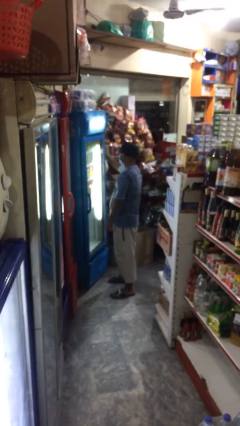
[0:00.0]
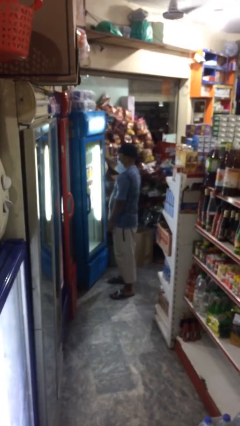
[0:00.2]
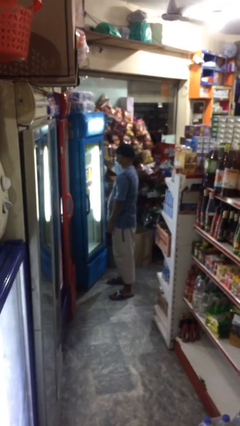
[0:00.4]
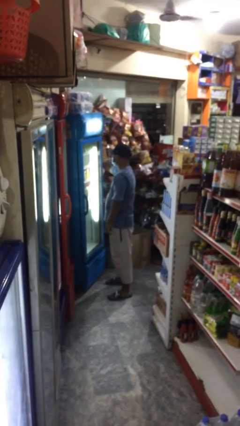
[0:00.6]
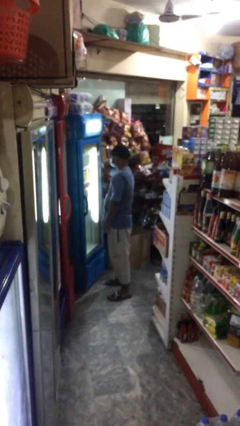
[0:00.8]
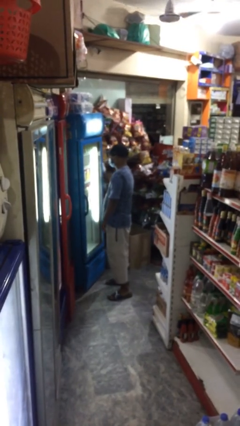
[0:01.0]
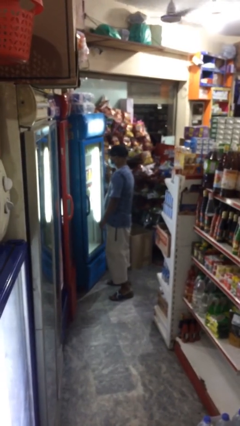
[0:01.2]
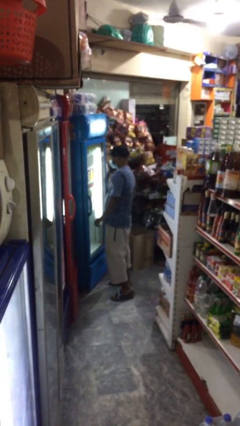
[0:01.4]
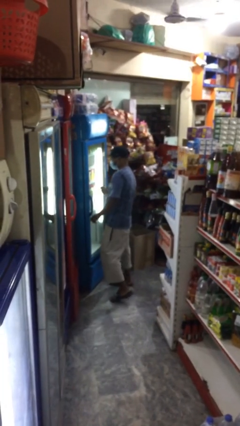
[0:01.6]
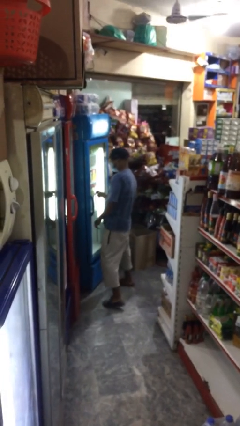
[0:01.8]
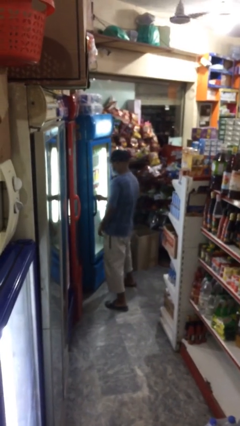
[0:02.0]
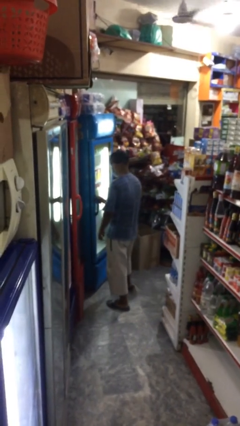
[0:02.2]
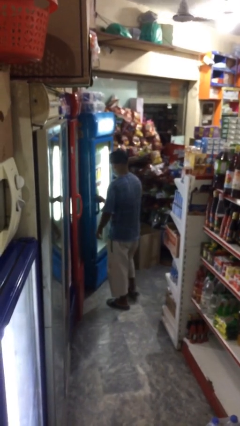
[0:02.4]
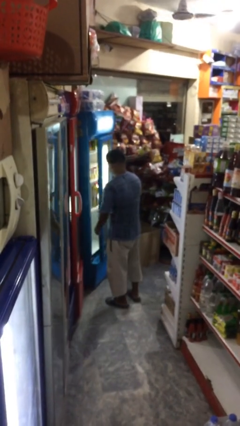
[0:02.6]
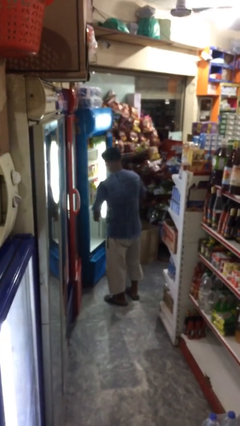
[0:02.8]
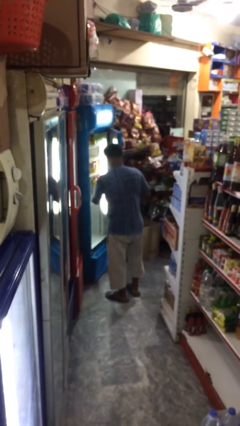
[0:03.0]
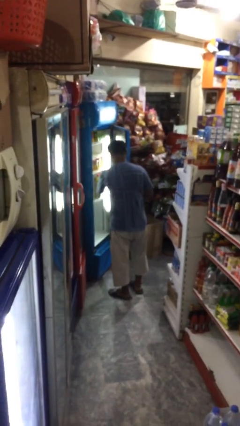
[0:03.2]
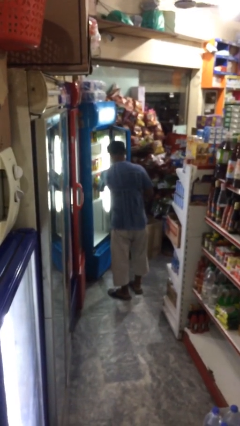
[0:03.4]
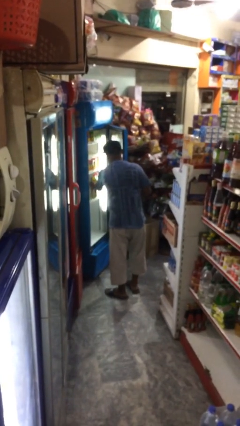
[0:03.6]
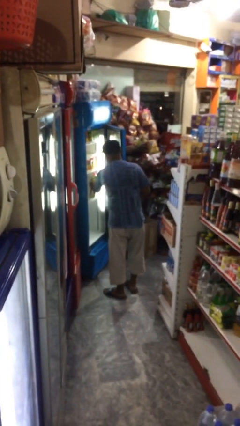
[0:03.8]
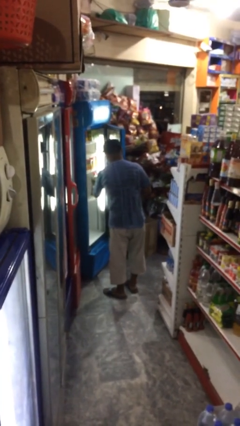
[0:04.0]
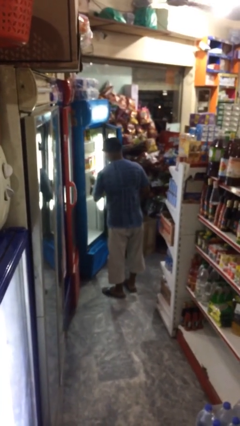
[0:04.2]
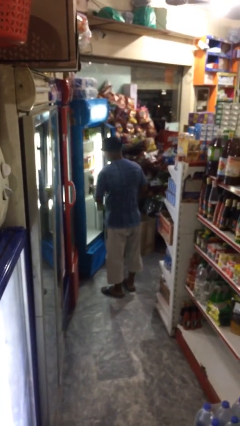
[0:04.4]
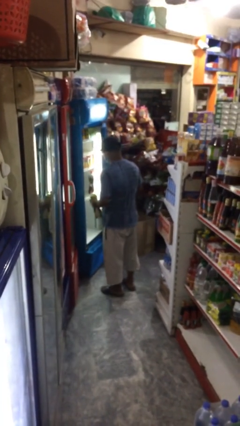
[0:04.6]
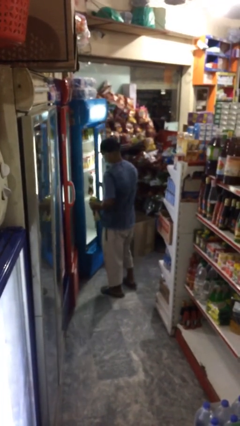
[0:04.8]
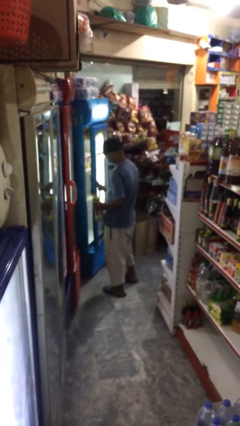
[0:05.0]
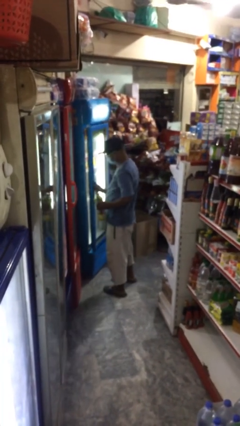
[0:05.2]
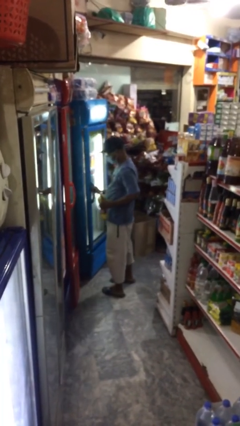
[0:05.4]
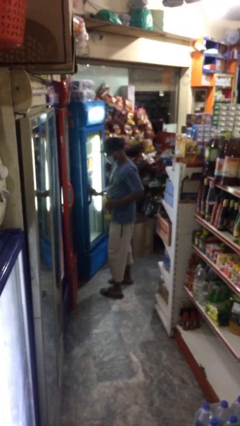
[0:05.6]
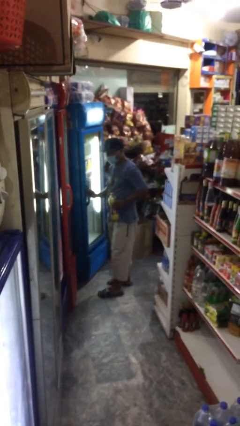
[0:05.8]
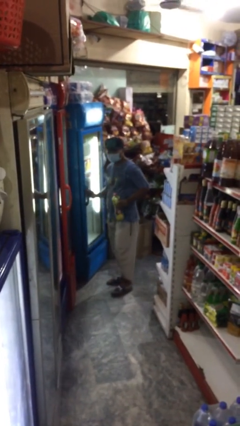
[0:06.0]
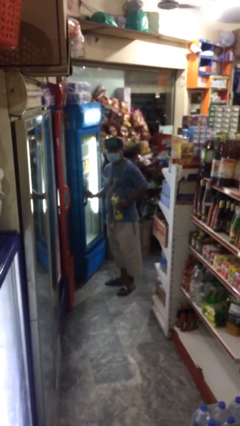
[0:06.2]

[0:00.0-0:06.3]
person purchases from machine

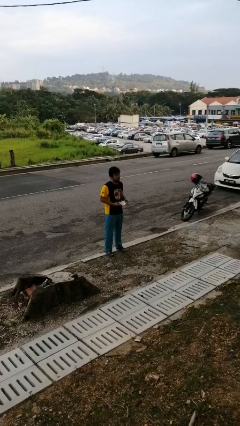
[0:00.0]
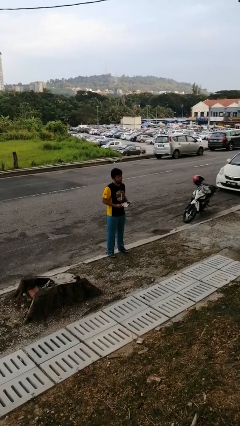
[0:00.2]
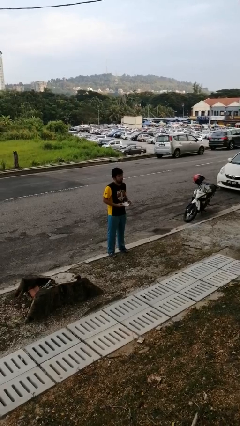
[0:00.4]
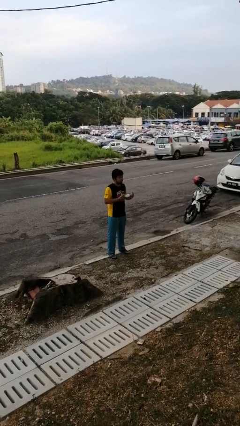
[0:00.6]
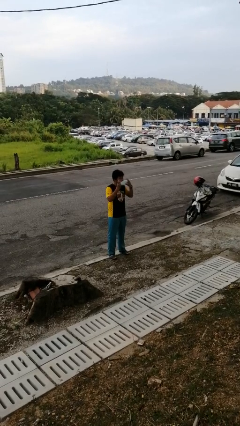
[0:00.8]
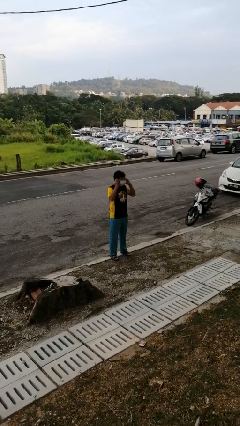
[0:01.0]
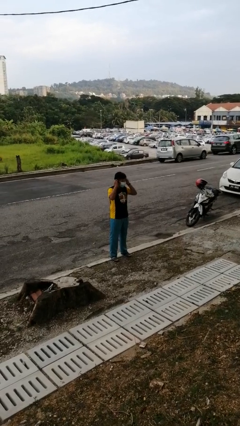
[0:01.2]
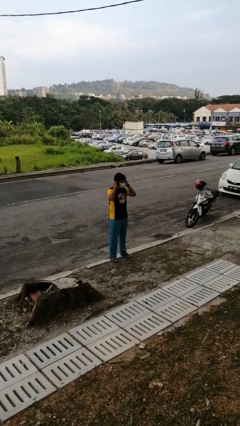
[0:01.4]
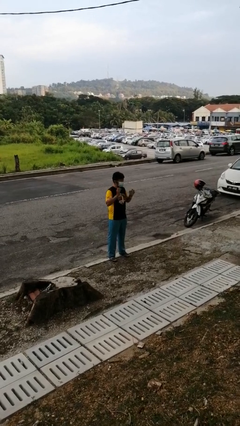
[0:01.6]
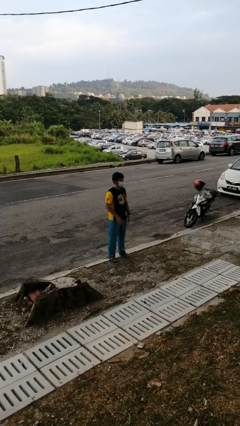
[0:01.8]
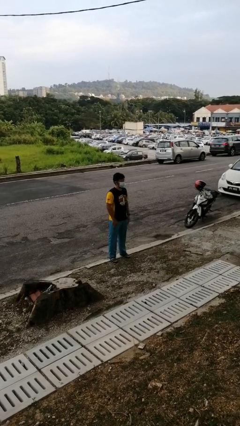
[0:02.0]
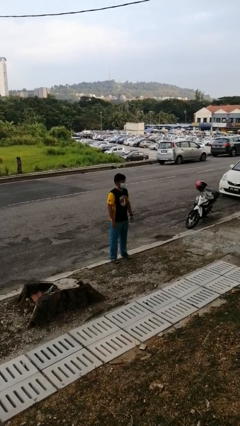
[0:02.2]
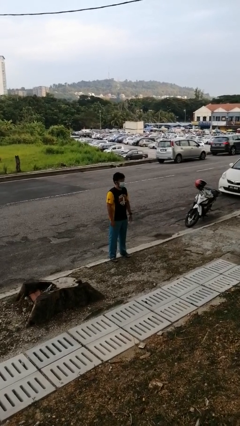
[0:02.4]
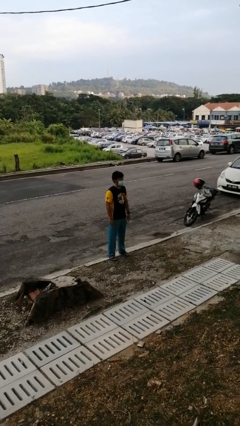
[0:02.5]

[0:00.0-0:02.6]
person puts on facemask

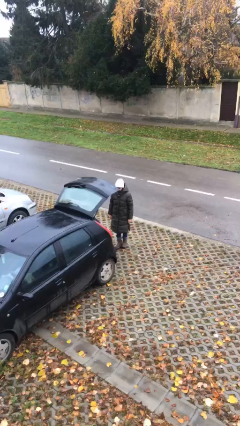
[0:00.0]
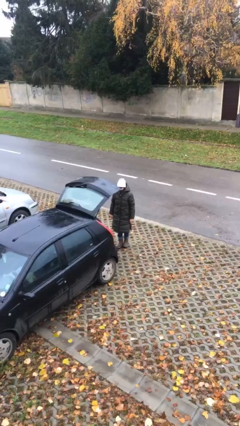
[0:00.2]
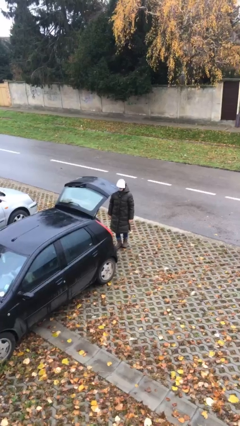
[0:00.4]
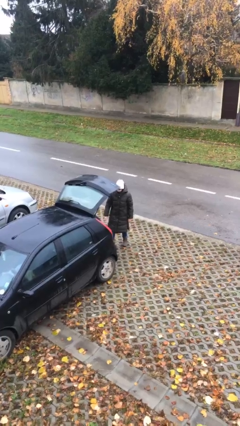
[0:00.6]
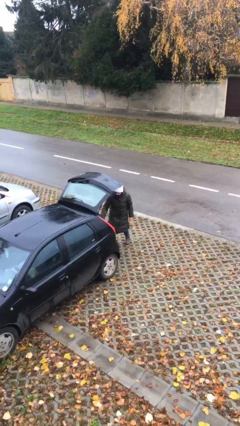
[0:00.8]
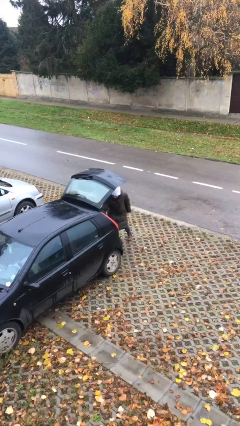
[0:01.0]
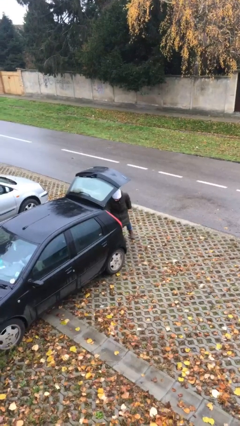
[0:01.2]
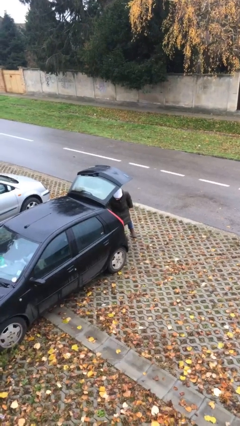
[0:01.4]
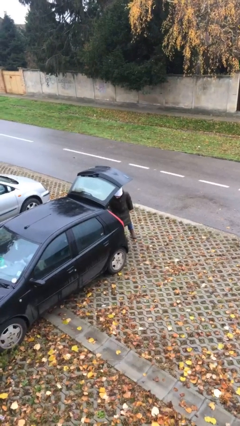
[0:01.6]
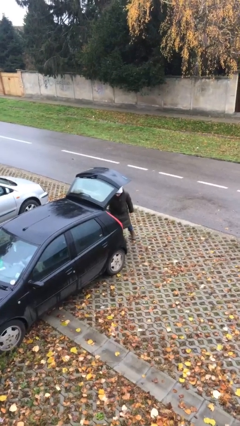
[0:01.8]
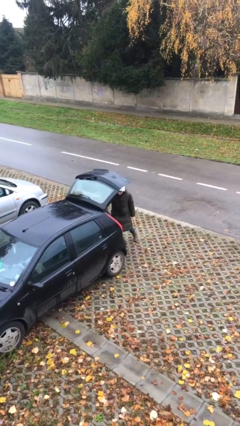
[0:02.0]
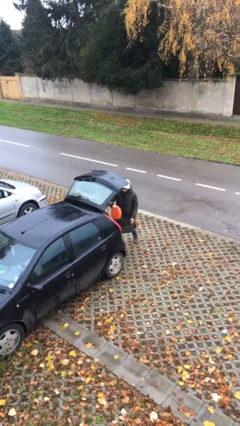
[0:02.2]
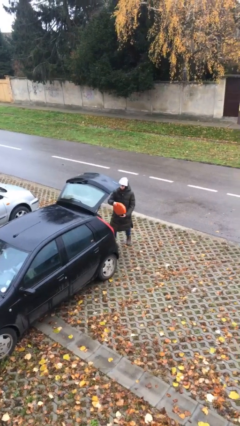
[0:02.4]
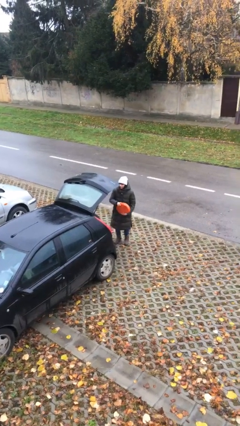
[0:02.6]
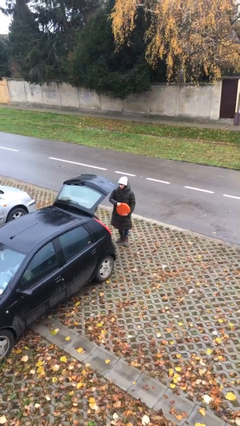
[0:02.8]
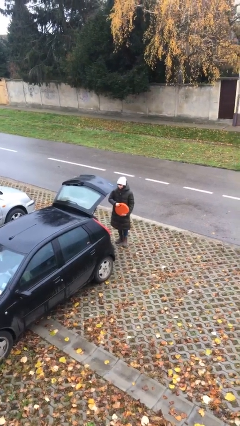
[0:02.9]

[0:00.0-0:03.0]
person unloads car

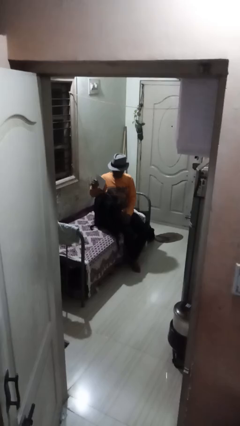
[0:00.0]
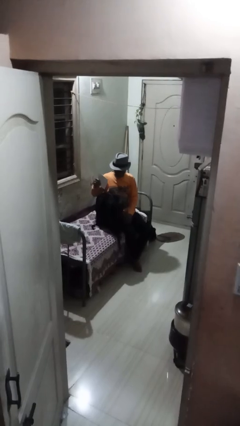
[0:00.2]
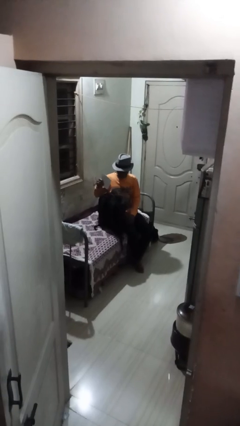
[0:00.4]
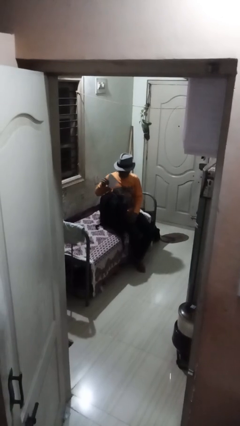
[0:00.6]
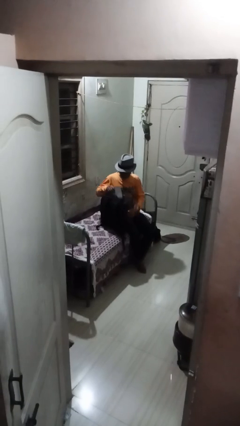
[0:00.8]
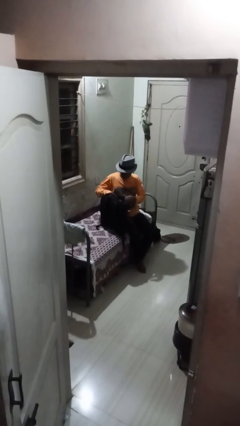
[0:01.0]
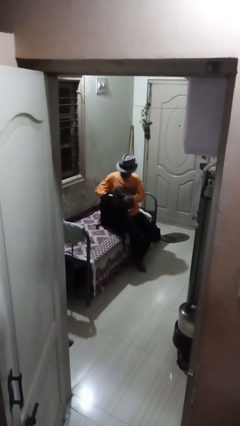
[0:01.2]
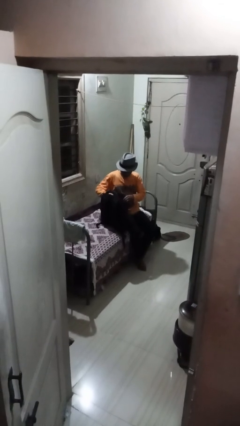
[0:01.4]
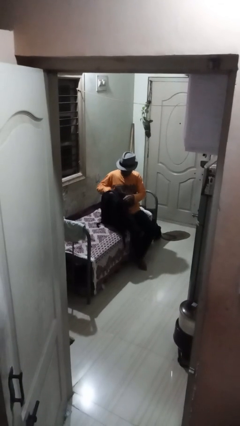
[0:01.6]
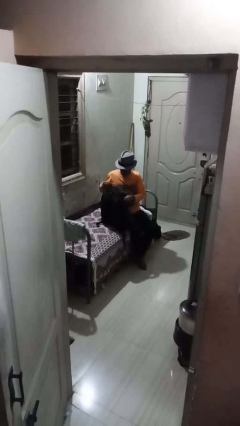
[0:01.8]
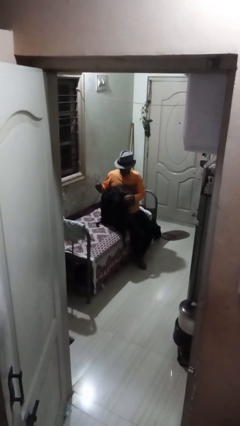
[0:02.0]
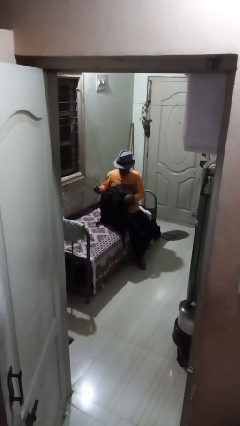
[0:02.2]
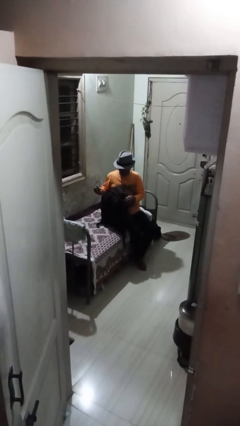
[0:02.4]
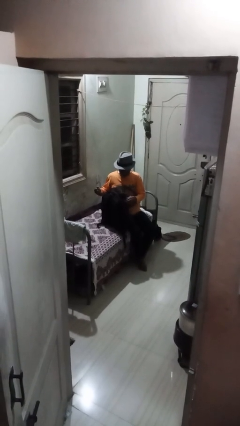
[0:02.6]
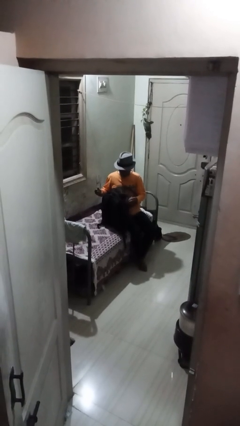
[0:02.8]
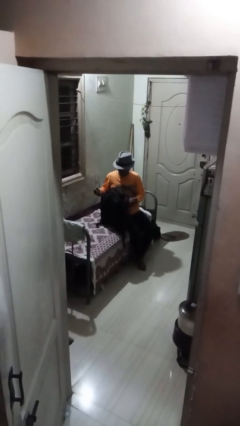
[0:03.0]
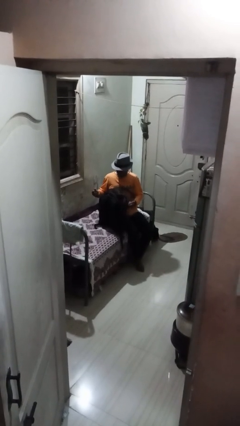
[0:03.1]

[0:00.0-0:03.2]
person puts object into backpack

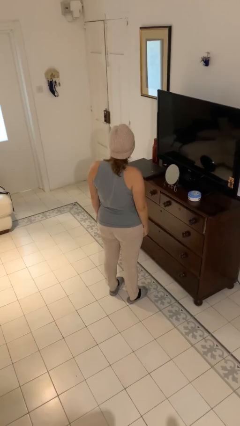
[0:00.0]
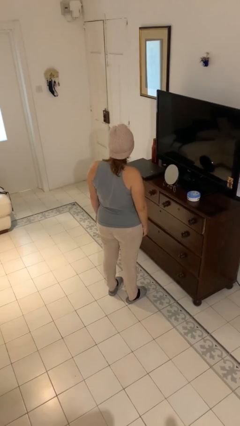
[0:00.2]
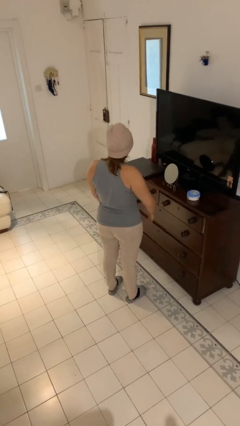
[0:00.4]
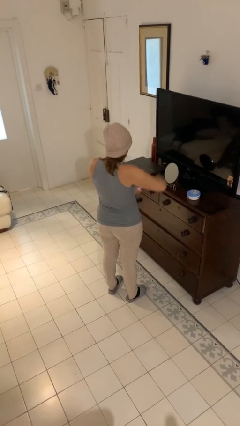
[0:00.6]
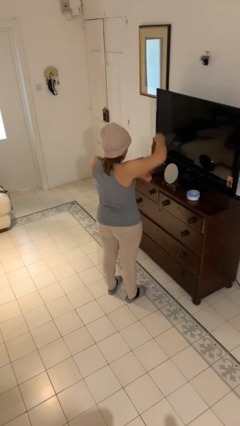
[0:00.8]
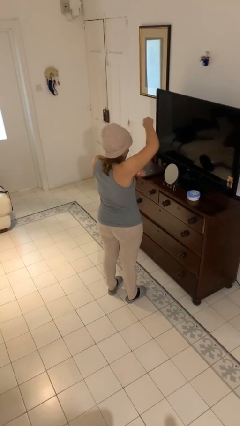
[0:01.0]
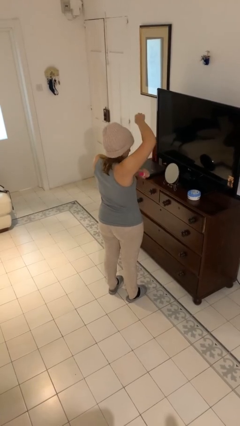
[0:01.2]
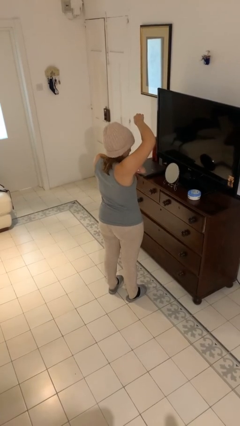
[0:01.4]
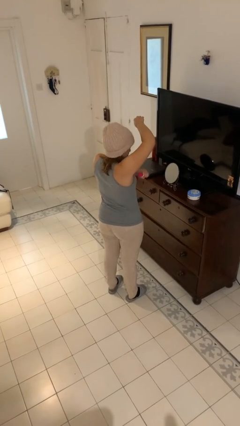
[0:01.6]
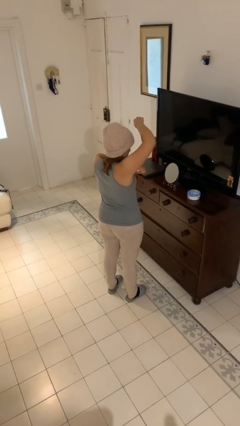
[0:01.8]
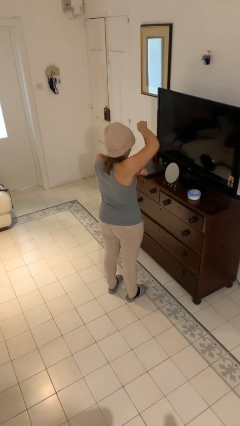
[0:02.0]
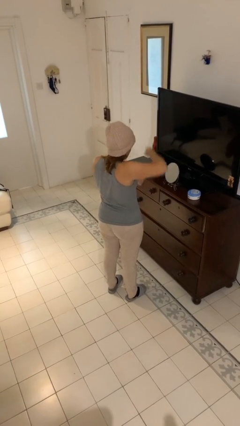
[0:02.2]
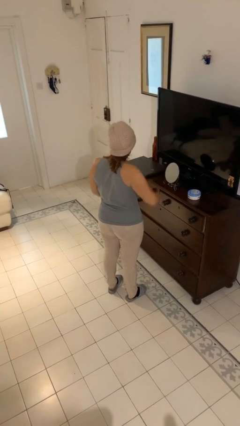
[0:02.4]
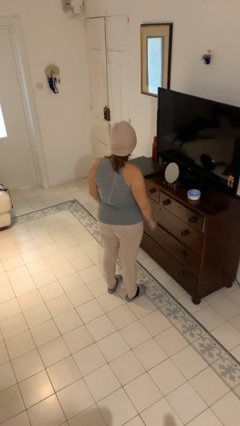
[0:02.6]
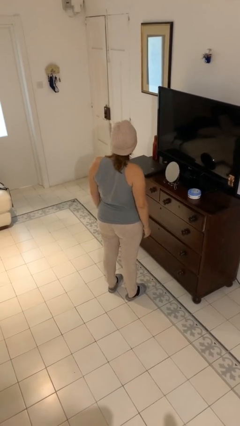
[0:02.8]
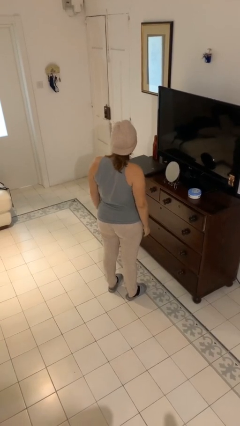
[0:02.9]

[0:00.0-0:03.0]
person applies deodorant
